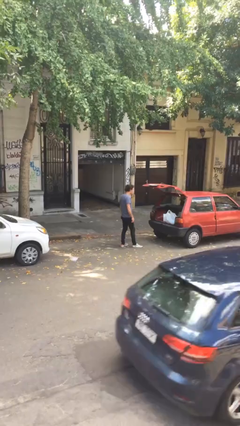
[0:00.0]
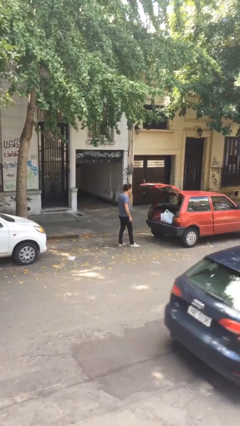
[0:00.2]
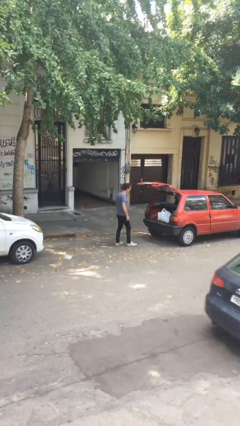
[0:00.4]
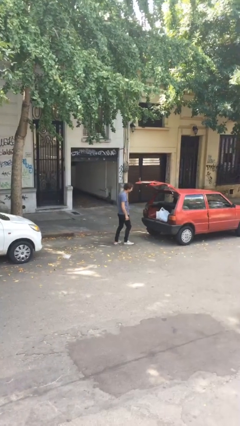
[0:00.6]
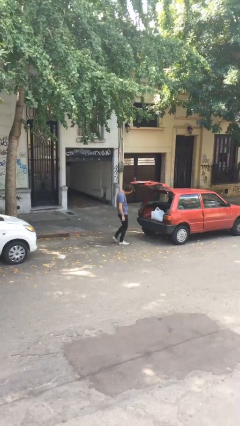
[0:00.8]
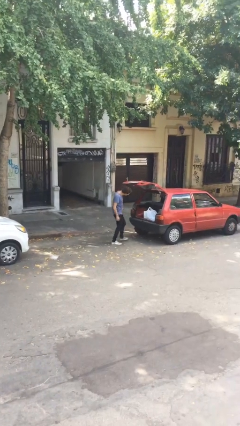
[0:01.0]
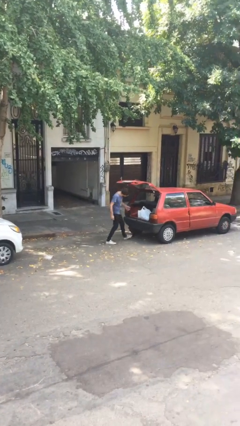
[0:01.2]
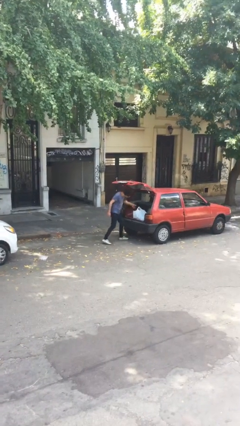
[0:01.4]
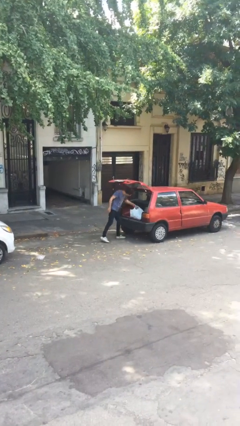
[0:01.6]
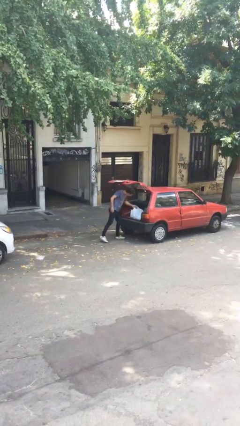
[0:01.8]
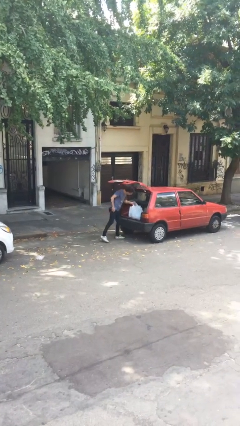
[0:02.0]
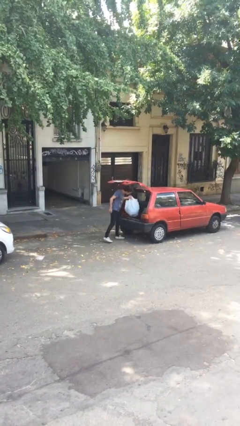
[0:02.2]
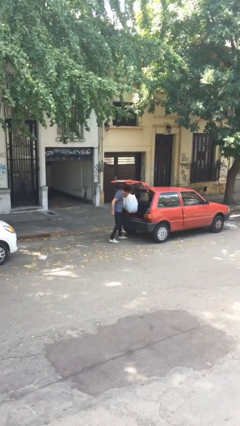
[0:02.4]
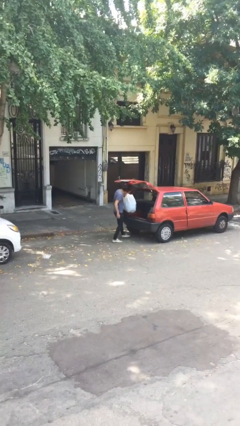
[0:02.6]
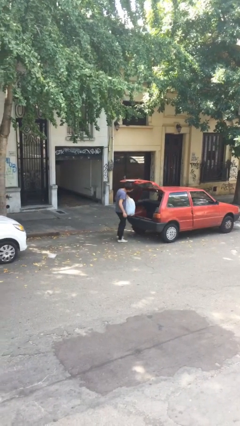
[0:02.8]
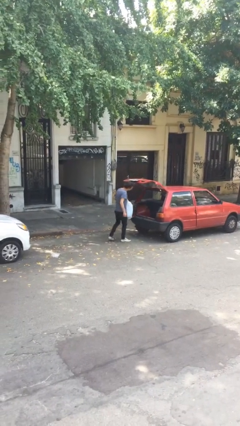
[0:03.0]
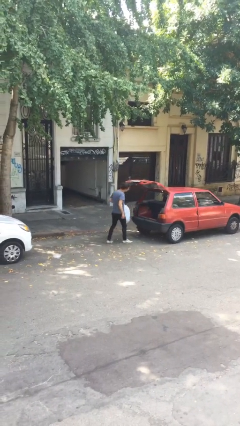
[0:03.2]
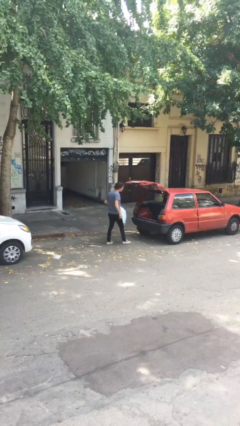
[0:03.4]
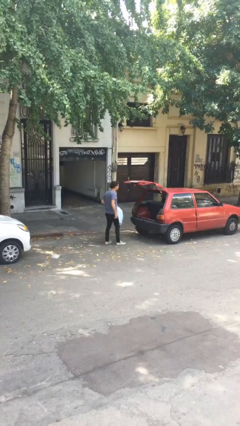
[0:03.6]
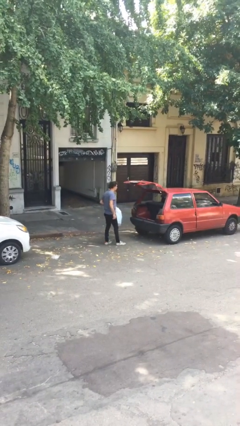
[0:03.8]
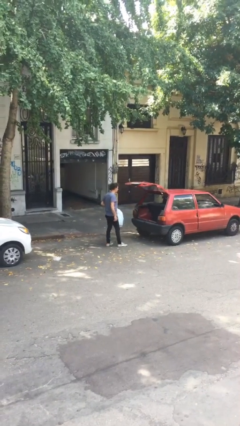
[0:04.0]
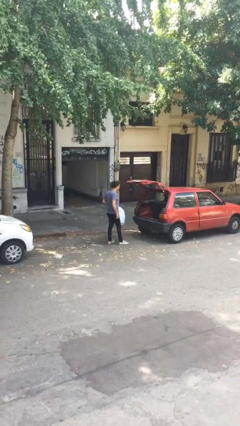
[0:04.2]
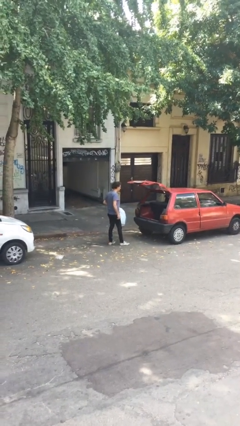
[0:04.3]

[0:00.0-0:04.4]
person unloads car

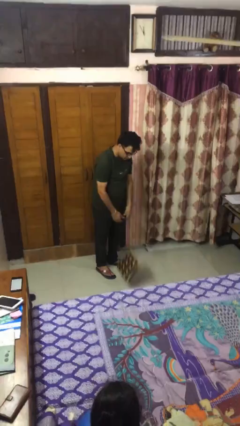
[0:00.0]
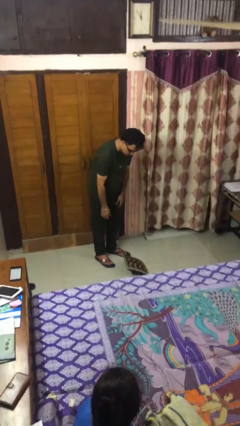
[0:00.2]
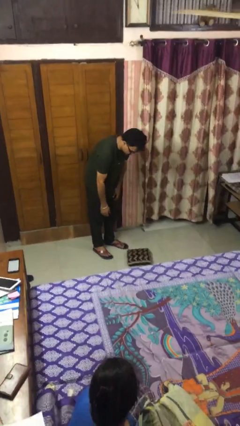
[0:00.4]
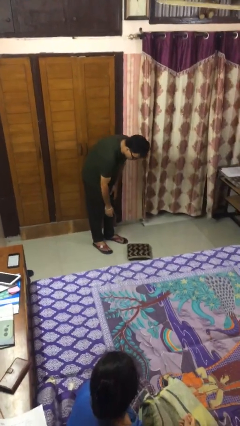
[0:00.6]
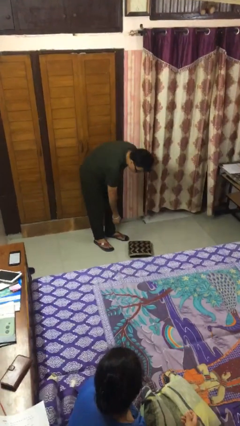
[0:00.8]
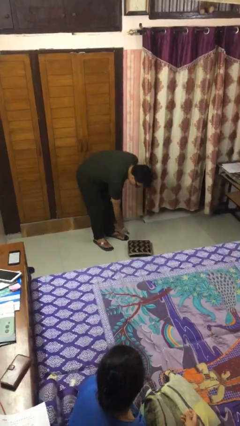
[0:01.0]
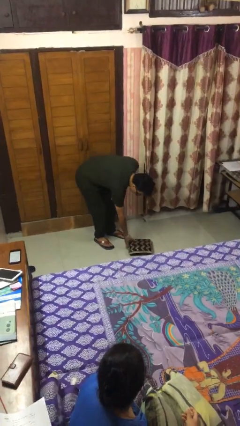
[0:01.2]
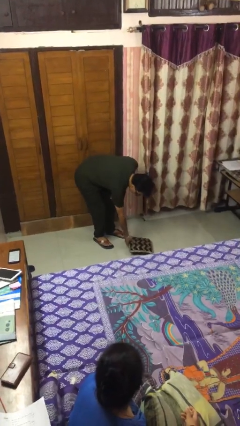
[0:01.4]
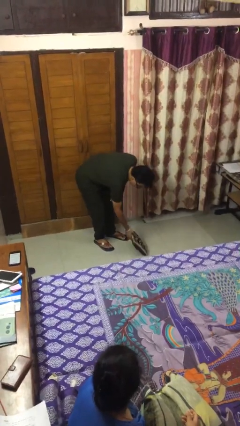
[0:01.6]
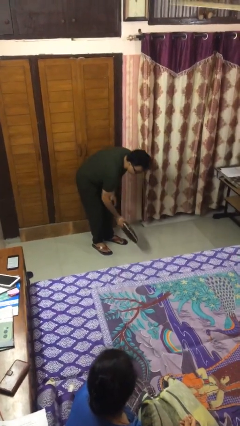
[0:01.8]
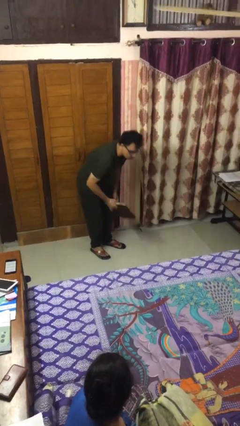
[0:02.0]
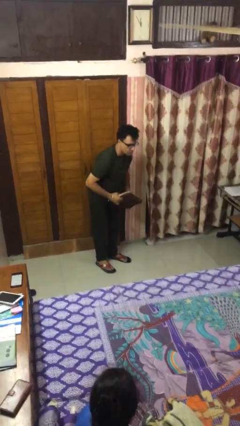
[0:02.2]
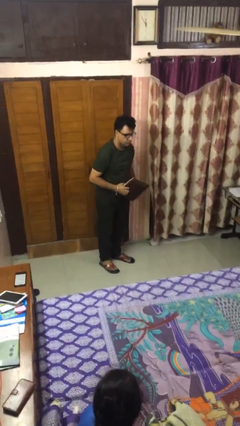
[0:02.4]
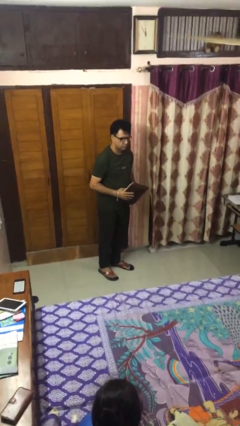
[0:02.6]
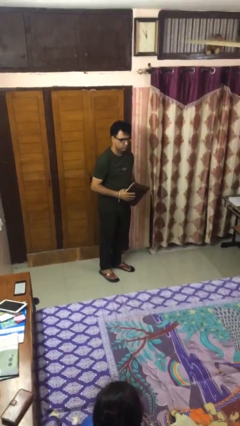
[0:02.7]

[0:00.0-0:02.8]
person picks up object from floor

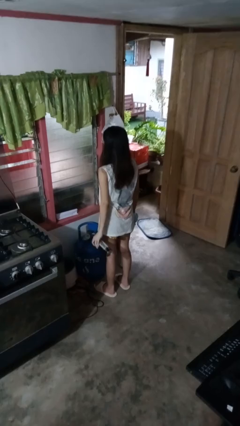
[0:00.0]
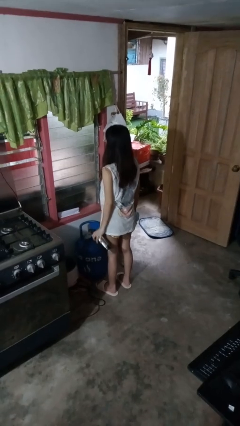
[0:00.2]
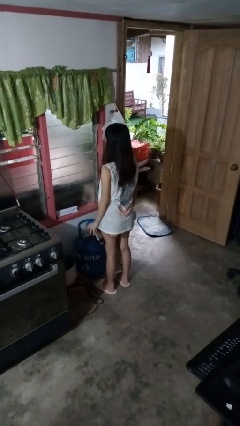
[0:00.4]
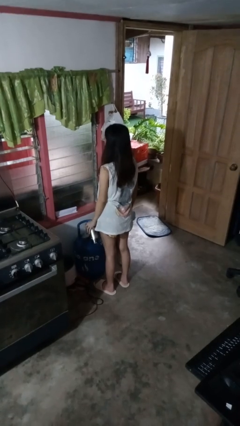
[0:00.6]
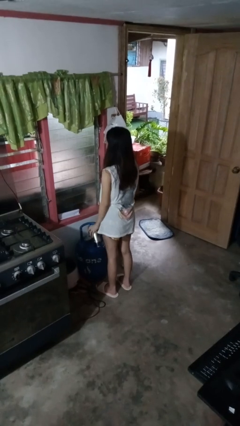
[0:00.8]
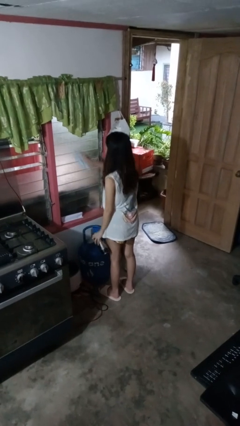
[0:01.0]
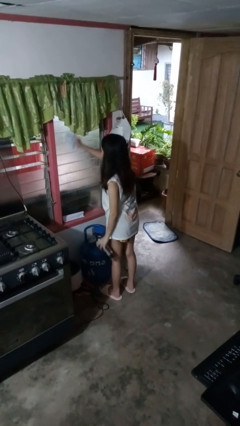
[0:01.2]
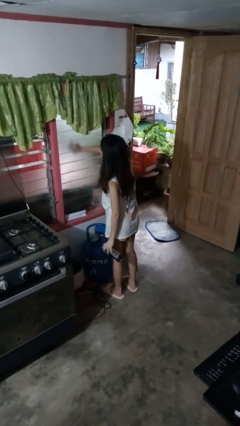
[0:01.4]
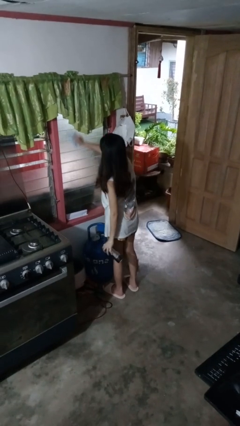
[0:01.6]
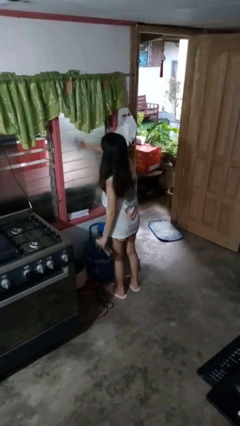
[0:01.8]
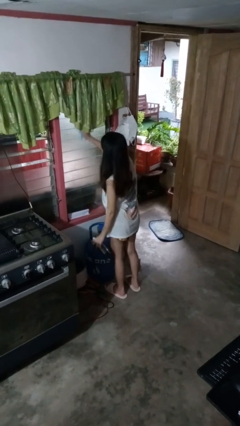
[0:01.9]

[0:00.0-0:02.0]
person washes window

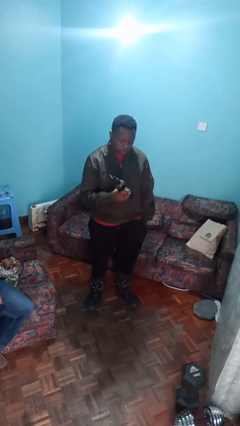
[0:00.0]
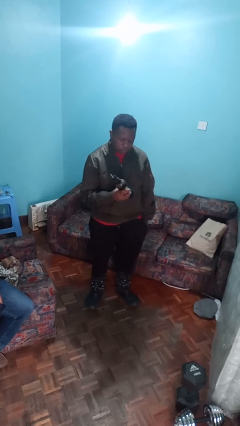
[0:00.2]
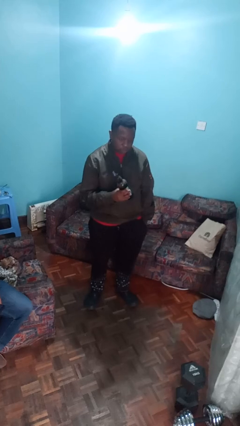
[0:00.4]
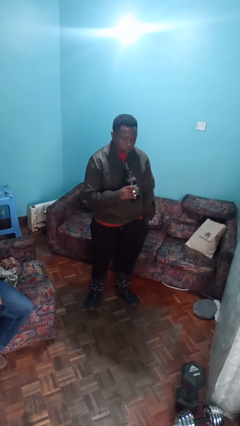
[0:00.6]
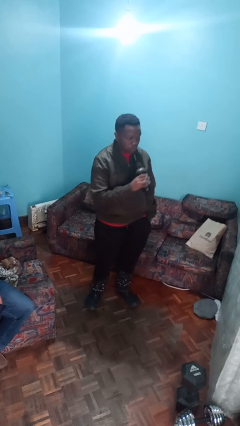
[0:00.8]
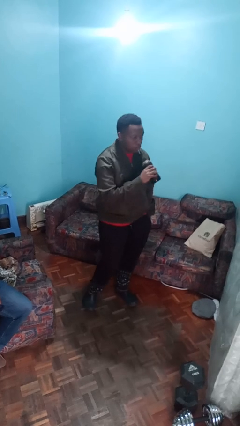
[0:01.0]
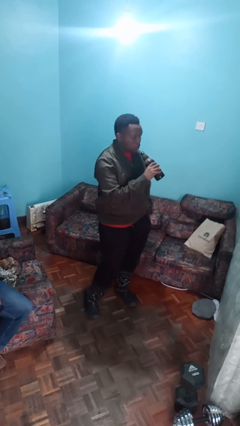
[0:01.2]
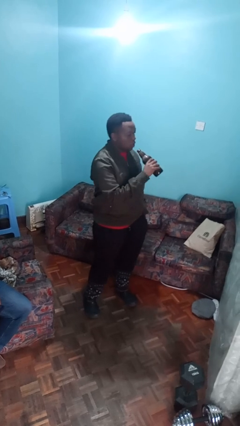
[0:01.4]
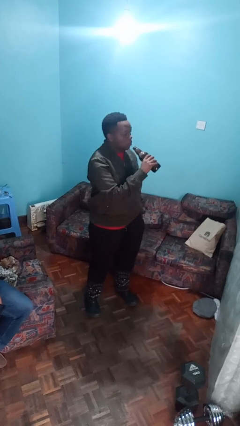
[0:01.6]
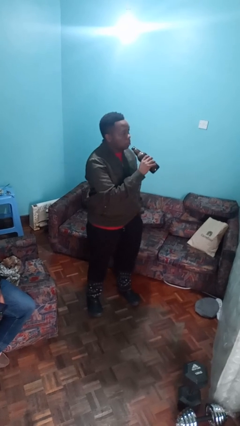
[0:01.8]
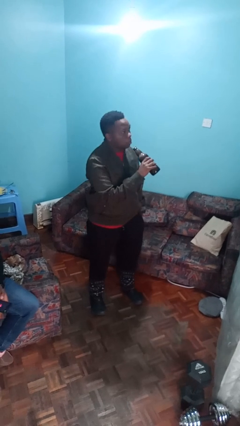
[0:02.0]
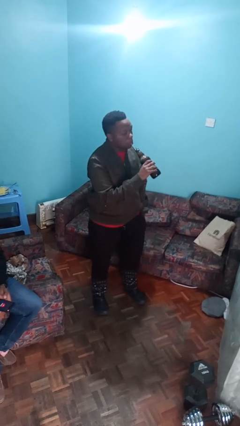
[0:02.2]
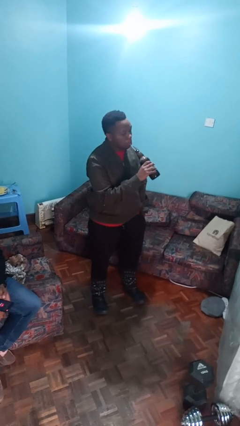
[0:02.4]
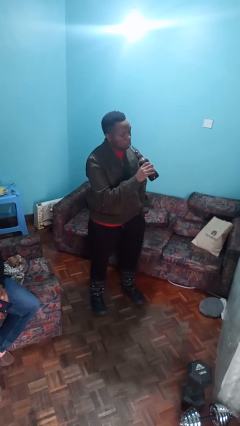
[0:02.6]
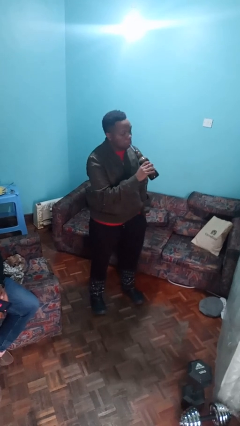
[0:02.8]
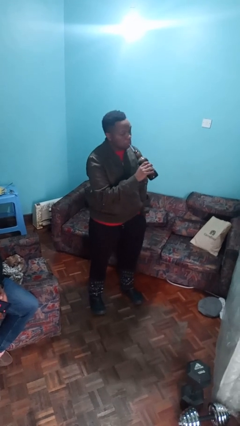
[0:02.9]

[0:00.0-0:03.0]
person drinks from straw

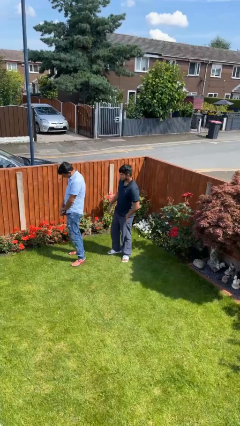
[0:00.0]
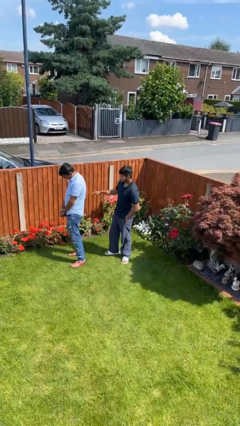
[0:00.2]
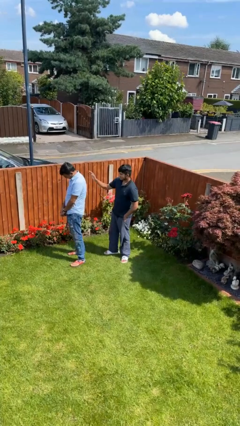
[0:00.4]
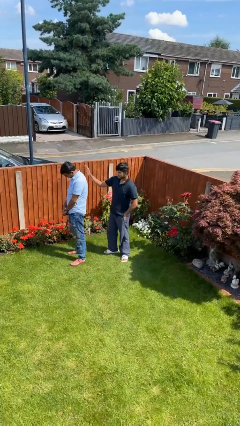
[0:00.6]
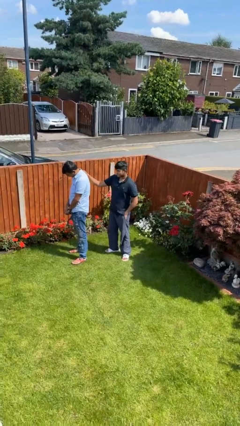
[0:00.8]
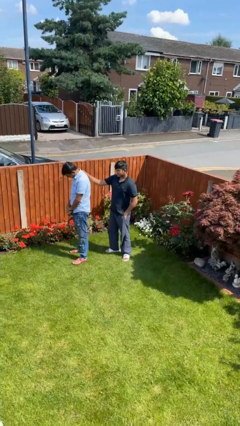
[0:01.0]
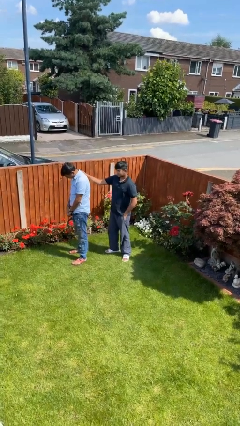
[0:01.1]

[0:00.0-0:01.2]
person touches back of person

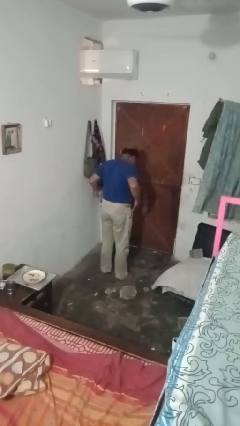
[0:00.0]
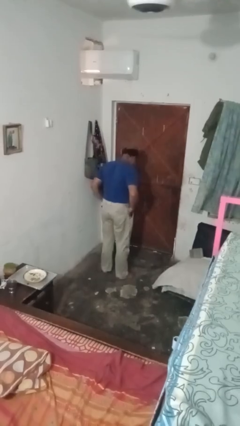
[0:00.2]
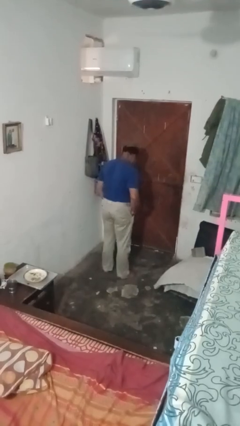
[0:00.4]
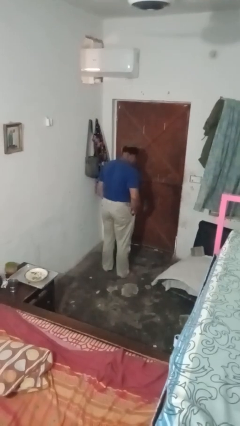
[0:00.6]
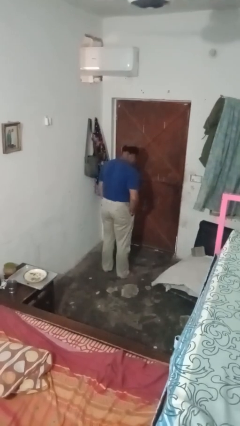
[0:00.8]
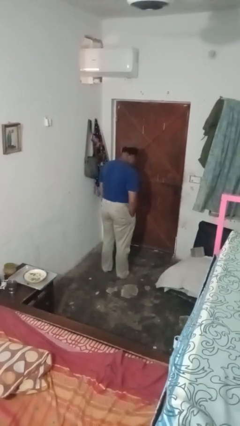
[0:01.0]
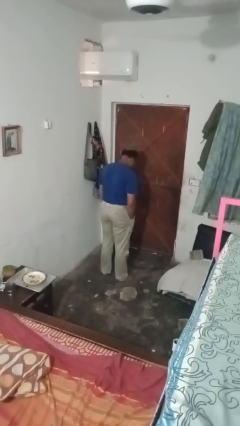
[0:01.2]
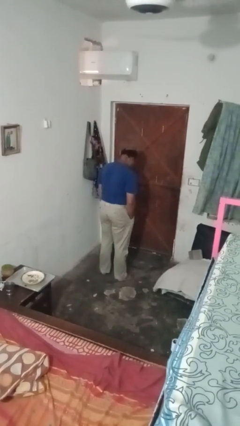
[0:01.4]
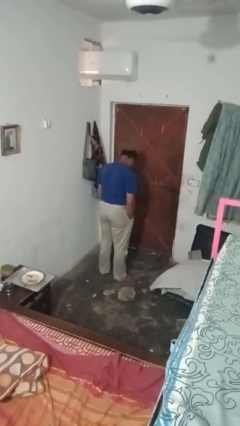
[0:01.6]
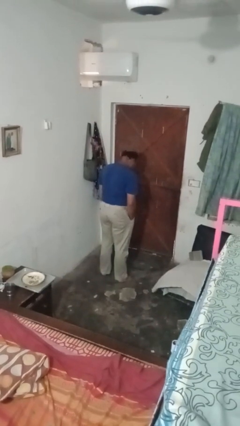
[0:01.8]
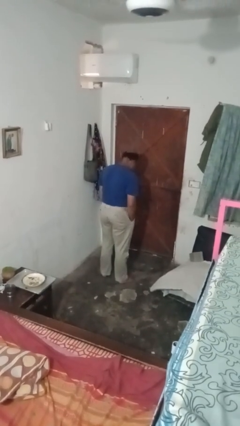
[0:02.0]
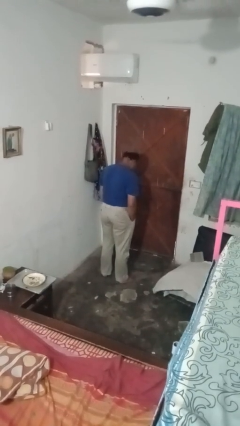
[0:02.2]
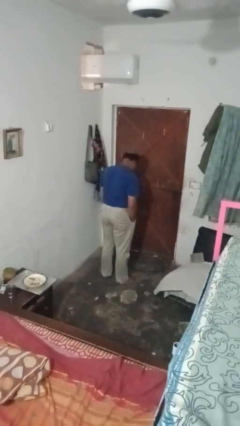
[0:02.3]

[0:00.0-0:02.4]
person puts hands in back pockets

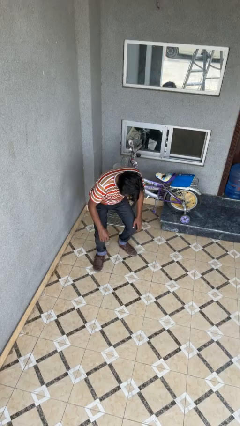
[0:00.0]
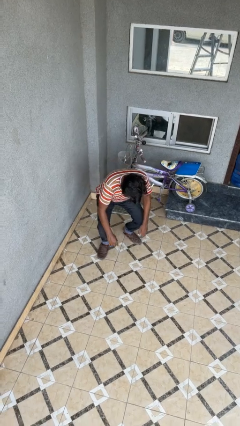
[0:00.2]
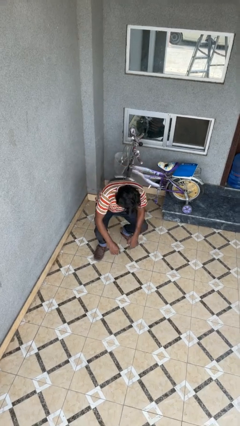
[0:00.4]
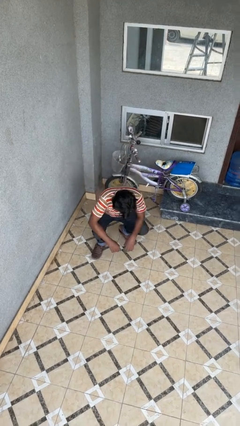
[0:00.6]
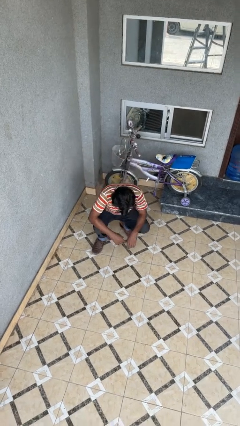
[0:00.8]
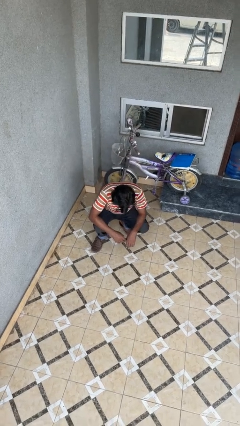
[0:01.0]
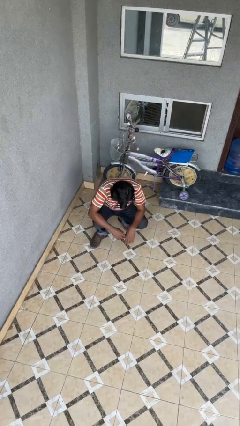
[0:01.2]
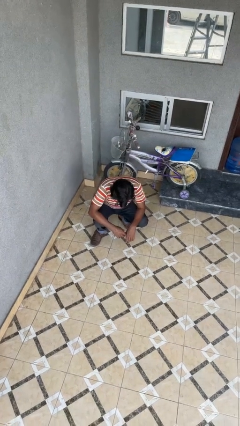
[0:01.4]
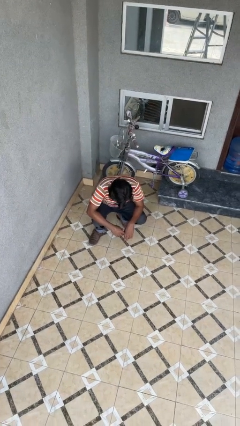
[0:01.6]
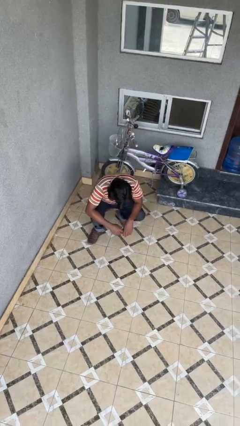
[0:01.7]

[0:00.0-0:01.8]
person squats
